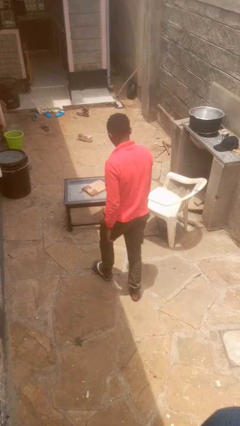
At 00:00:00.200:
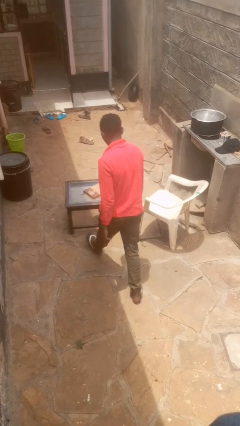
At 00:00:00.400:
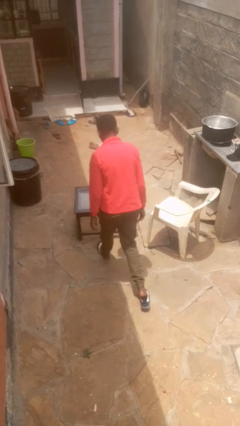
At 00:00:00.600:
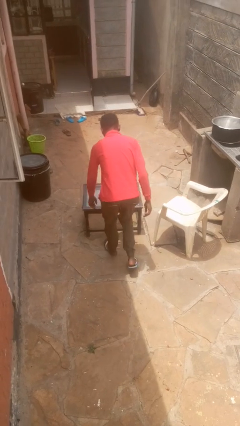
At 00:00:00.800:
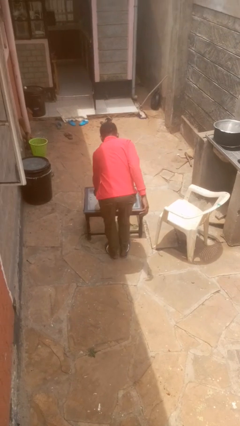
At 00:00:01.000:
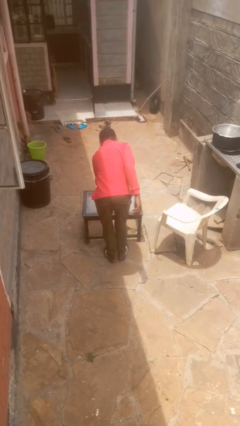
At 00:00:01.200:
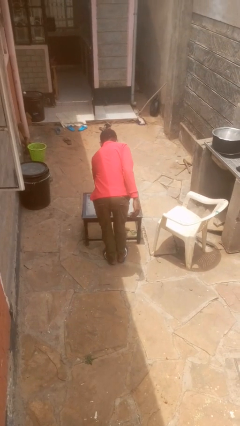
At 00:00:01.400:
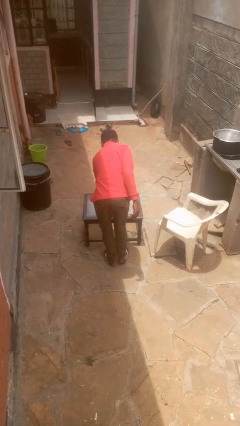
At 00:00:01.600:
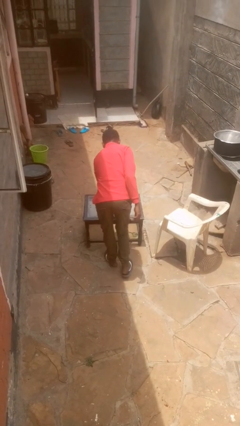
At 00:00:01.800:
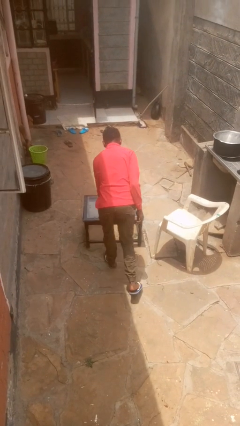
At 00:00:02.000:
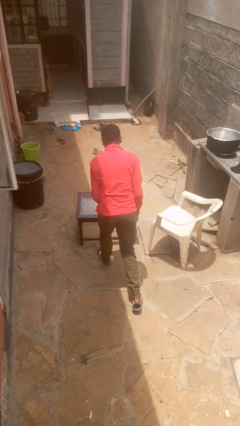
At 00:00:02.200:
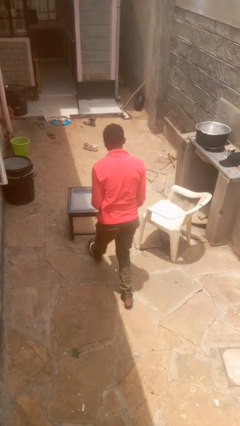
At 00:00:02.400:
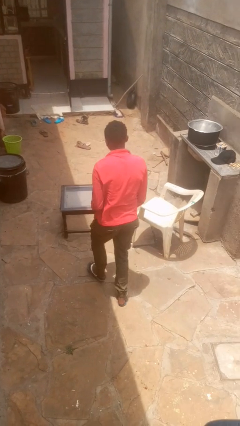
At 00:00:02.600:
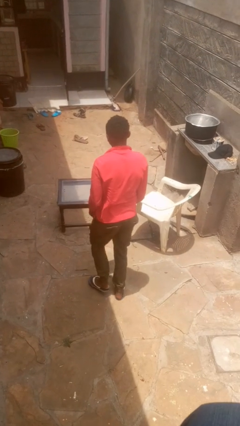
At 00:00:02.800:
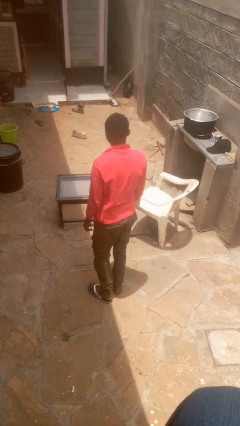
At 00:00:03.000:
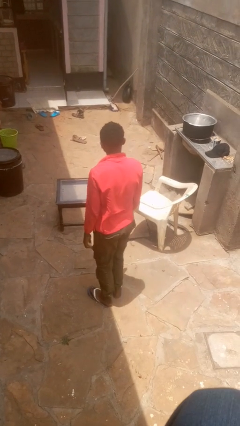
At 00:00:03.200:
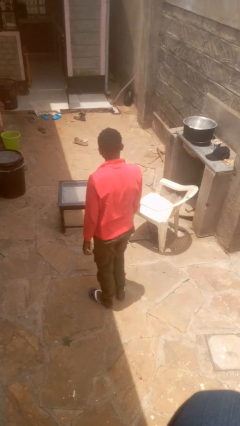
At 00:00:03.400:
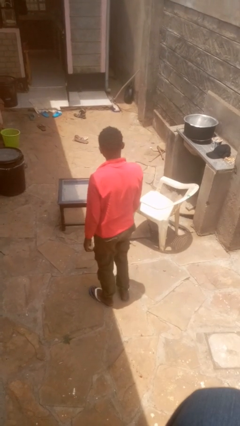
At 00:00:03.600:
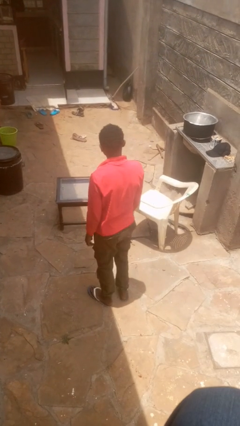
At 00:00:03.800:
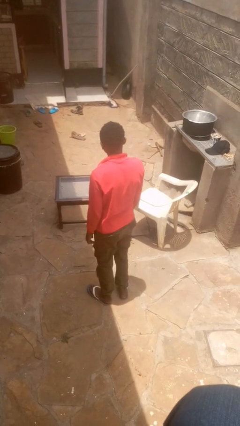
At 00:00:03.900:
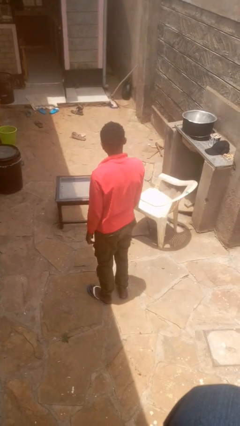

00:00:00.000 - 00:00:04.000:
person picks up object from table

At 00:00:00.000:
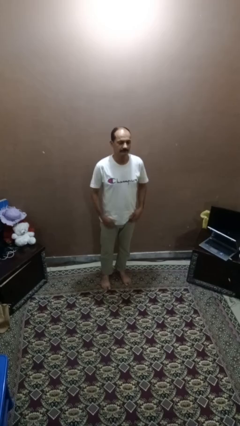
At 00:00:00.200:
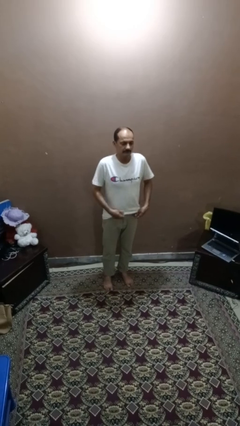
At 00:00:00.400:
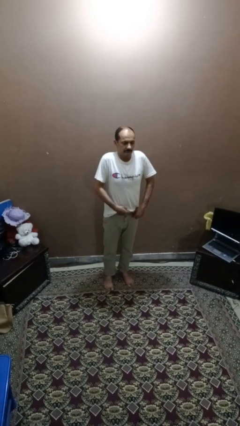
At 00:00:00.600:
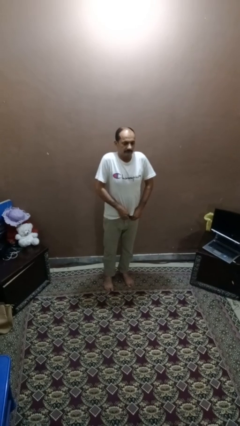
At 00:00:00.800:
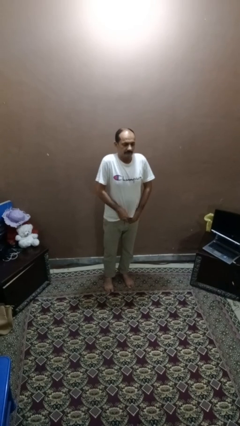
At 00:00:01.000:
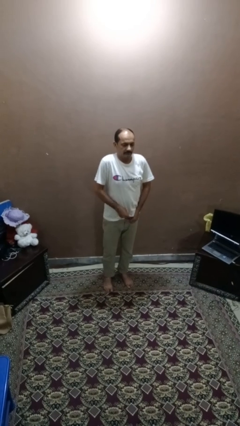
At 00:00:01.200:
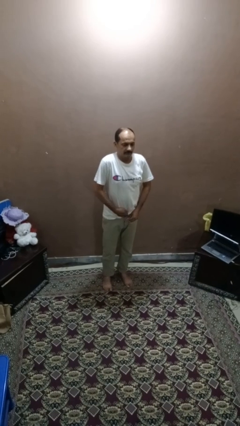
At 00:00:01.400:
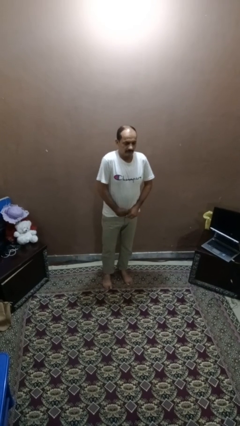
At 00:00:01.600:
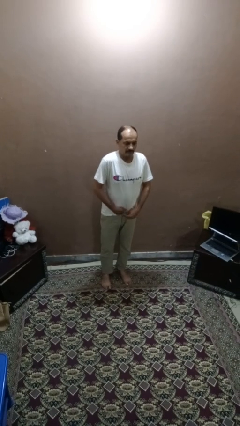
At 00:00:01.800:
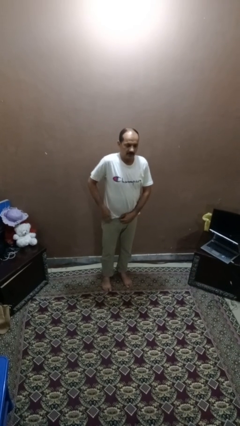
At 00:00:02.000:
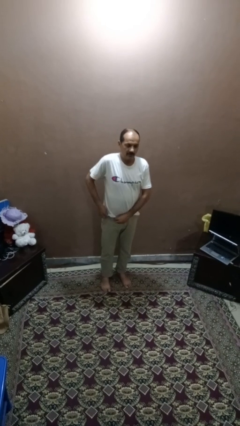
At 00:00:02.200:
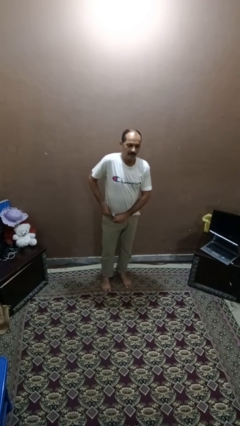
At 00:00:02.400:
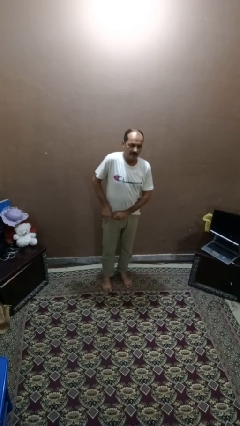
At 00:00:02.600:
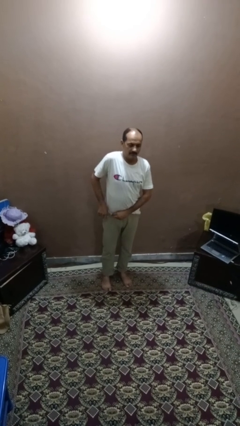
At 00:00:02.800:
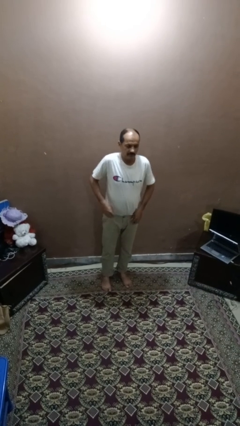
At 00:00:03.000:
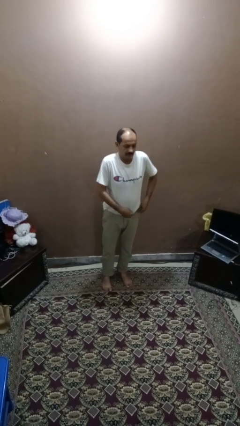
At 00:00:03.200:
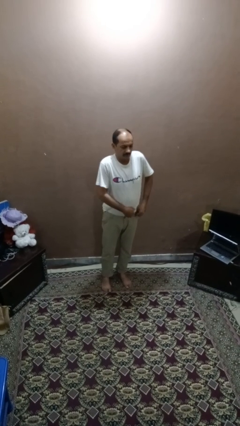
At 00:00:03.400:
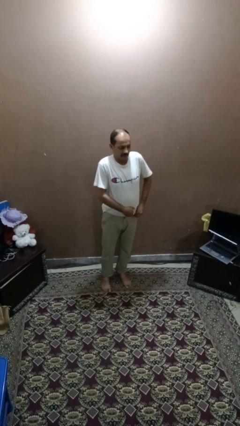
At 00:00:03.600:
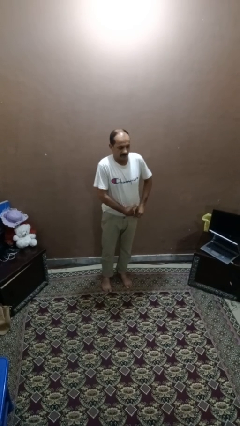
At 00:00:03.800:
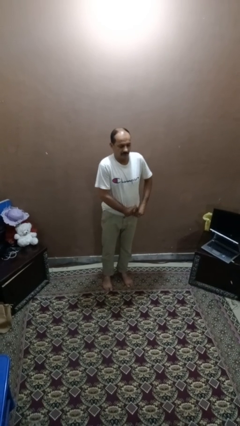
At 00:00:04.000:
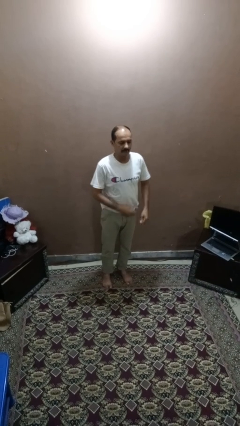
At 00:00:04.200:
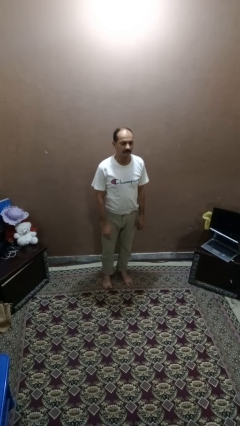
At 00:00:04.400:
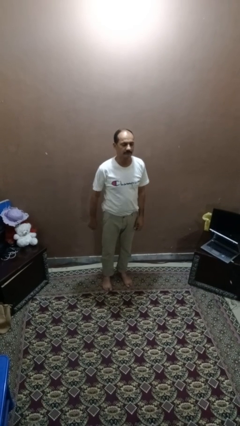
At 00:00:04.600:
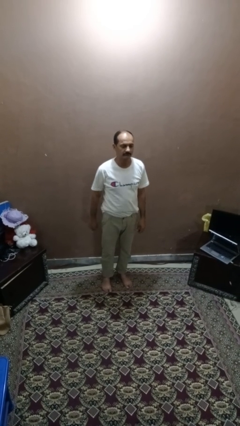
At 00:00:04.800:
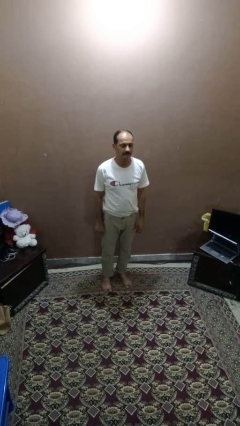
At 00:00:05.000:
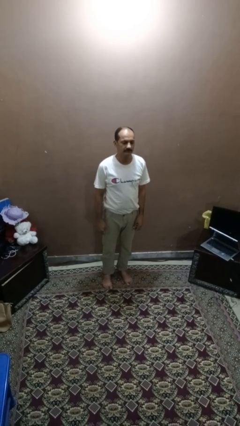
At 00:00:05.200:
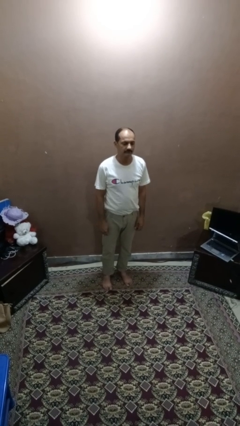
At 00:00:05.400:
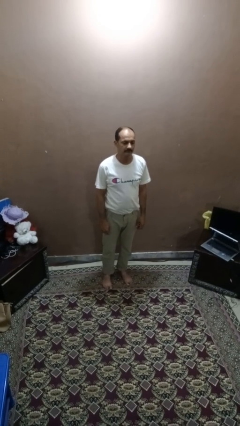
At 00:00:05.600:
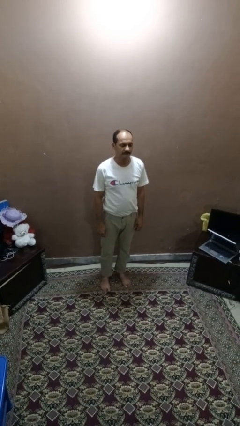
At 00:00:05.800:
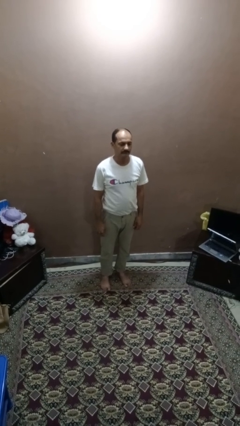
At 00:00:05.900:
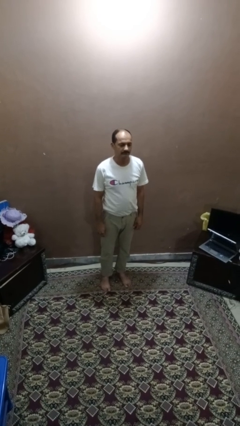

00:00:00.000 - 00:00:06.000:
person tucks in shirt

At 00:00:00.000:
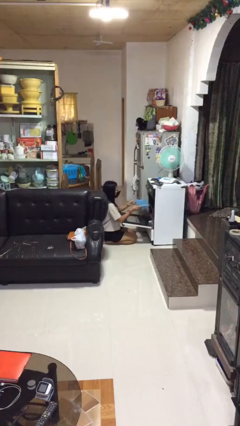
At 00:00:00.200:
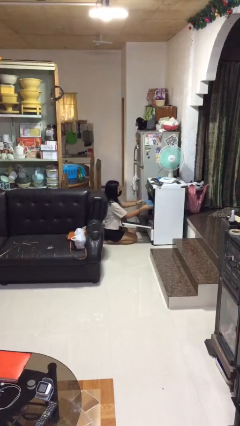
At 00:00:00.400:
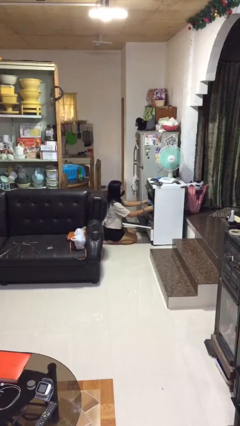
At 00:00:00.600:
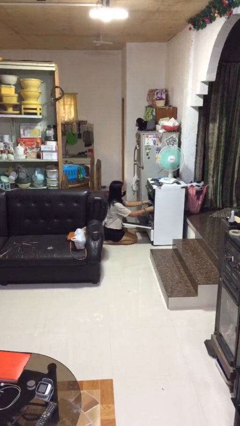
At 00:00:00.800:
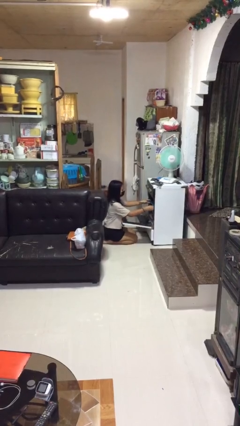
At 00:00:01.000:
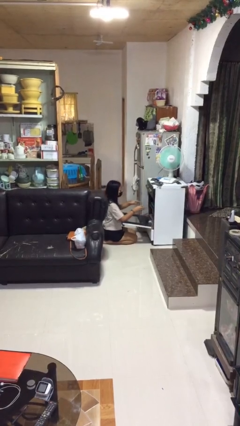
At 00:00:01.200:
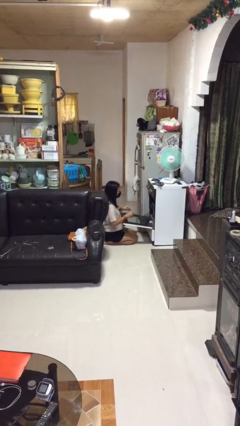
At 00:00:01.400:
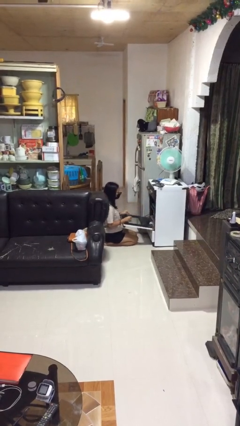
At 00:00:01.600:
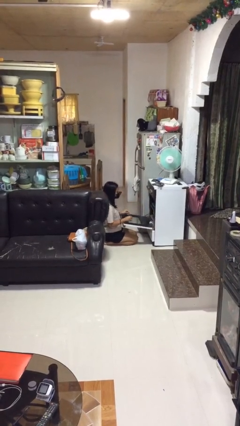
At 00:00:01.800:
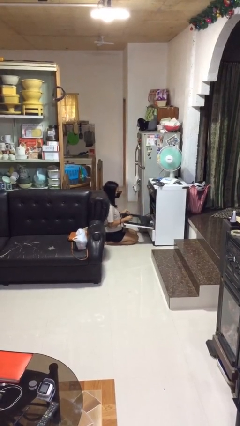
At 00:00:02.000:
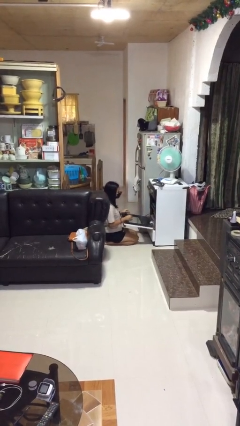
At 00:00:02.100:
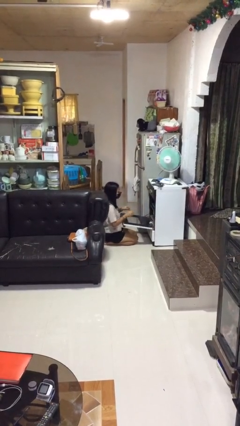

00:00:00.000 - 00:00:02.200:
person puts object into oven

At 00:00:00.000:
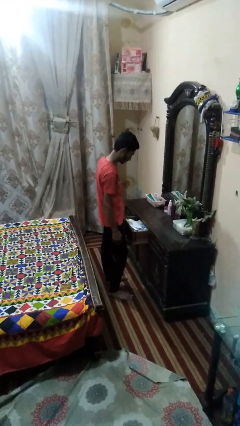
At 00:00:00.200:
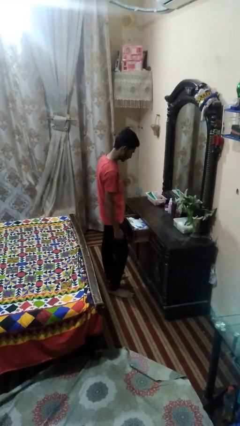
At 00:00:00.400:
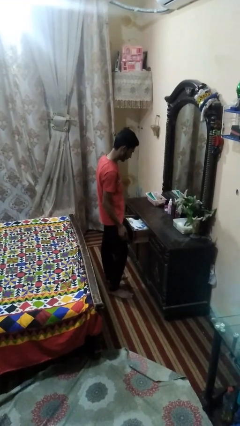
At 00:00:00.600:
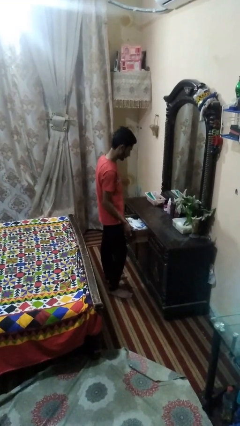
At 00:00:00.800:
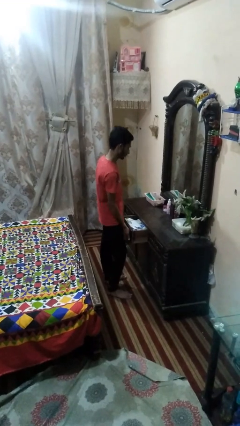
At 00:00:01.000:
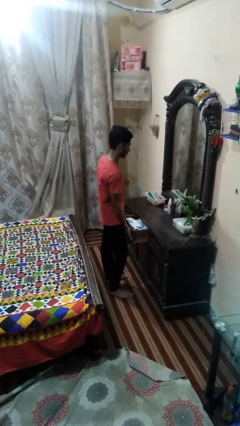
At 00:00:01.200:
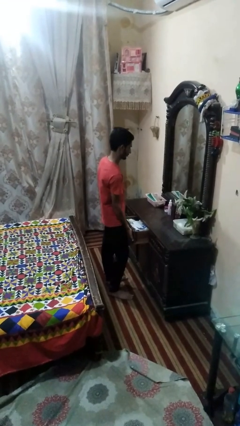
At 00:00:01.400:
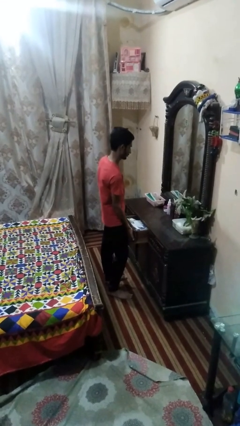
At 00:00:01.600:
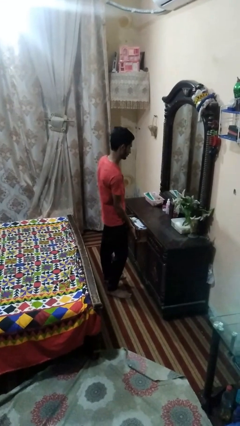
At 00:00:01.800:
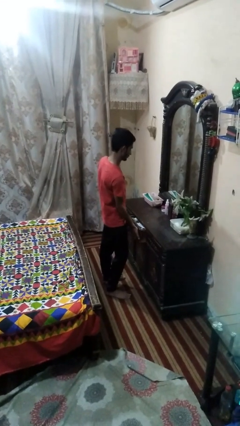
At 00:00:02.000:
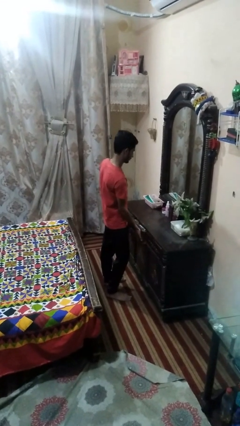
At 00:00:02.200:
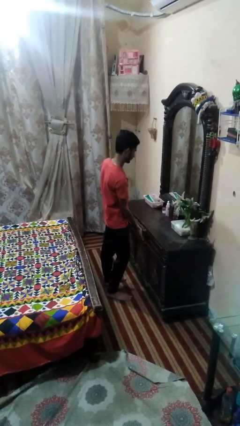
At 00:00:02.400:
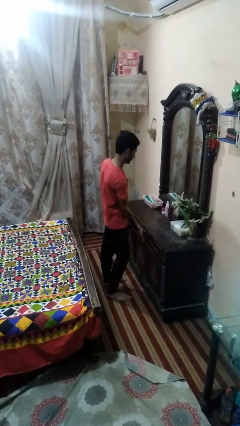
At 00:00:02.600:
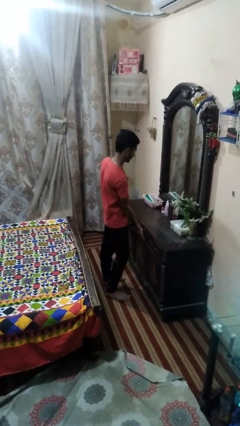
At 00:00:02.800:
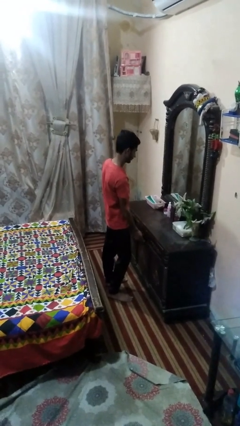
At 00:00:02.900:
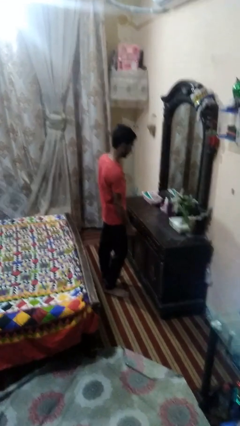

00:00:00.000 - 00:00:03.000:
person closes dresser drawer

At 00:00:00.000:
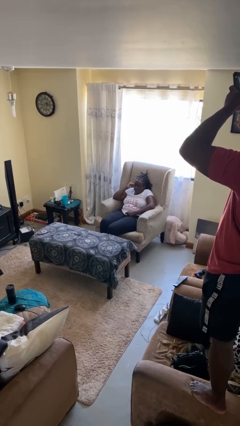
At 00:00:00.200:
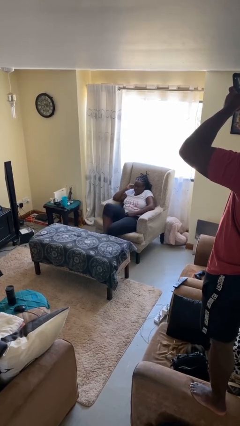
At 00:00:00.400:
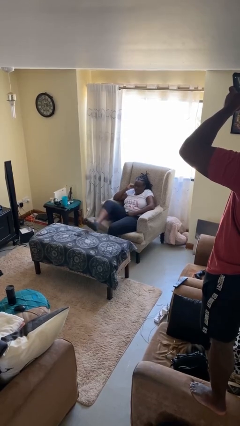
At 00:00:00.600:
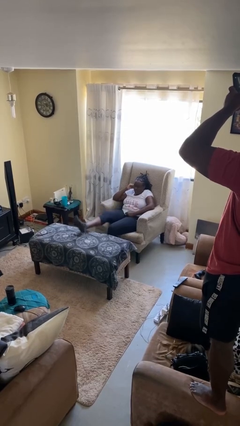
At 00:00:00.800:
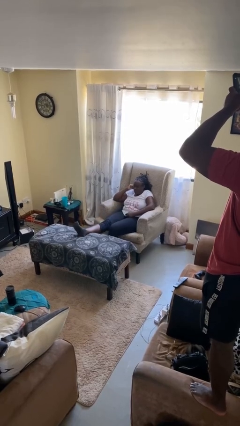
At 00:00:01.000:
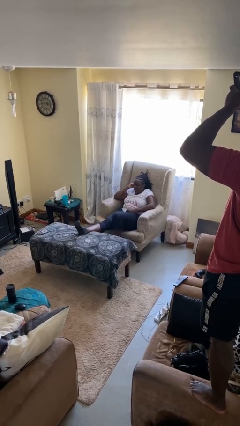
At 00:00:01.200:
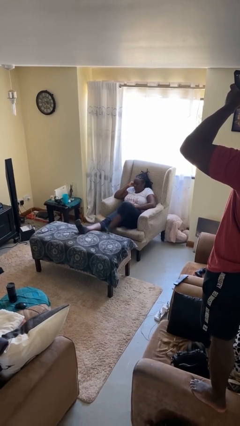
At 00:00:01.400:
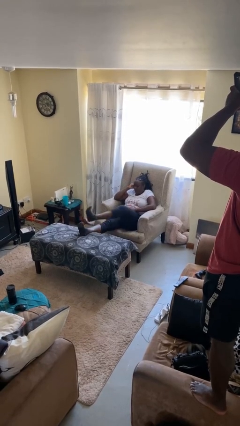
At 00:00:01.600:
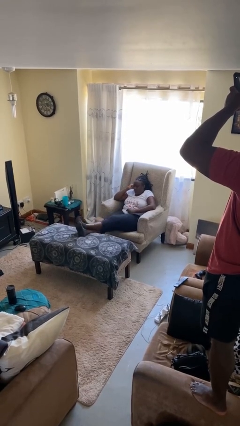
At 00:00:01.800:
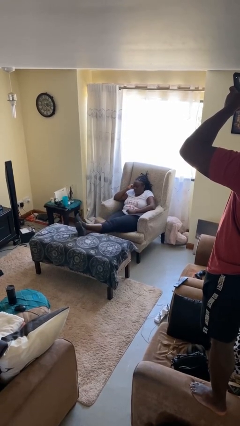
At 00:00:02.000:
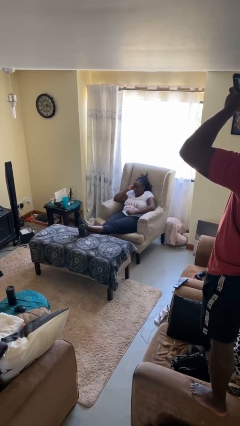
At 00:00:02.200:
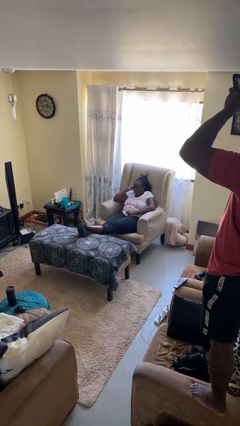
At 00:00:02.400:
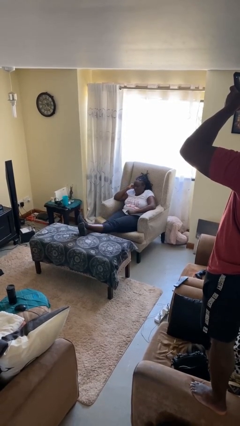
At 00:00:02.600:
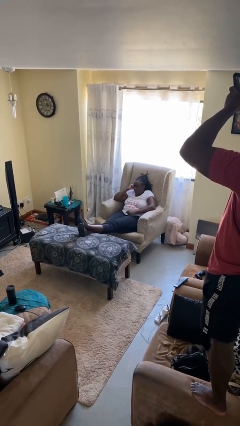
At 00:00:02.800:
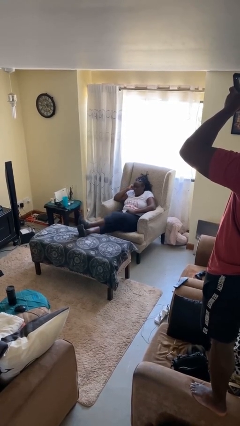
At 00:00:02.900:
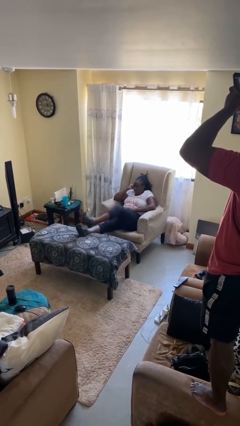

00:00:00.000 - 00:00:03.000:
person puts feet up
